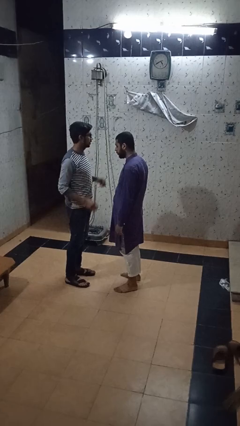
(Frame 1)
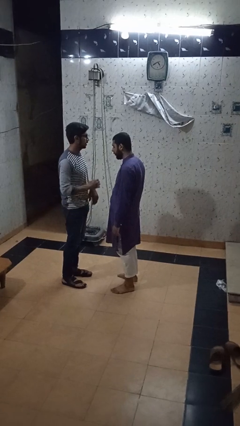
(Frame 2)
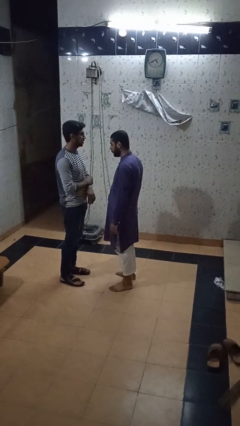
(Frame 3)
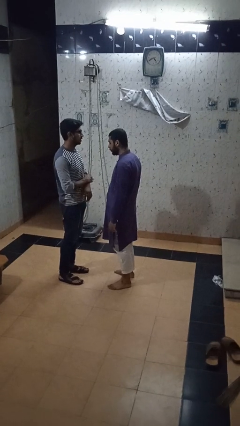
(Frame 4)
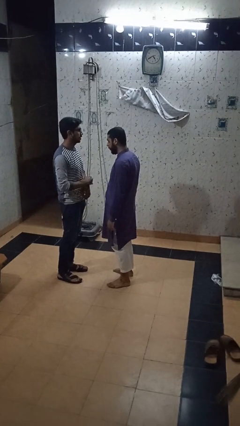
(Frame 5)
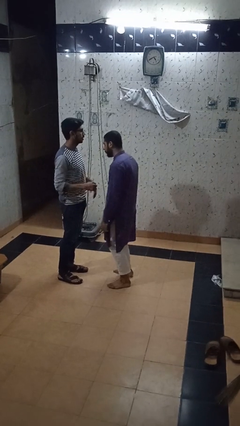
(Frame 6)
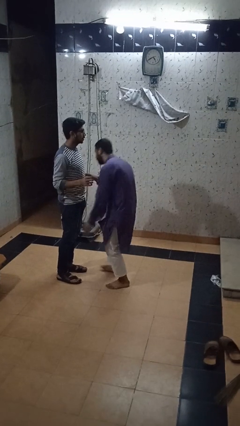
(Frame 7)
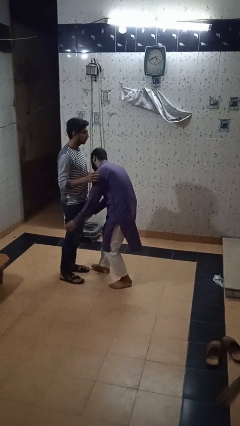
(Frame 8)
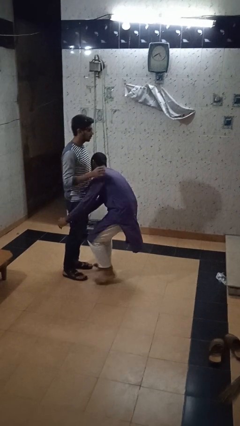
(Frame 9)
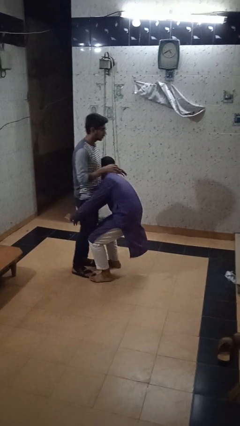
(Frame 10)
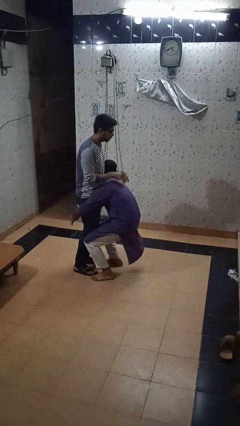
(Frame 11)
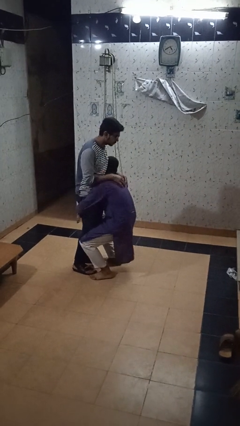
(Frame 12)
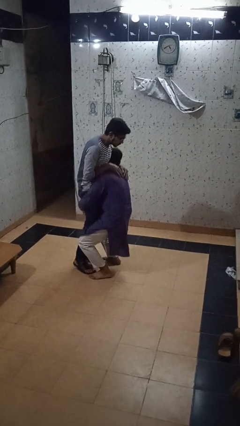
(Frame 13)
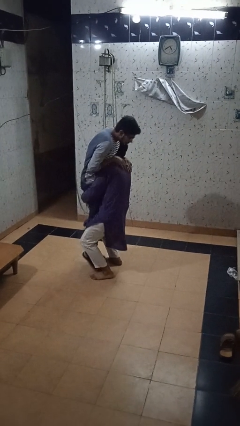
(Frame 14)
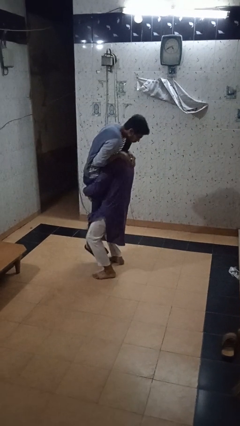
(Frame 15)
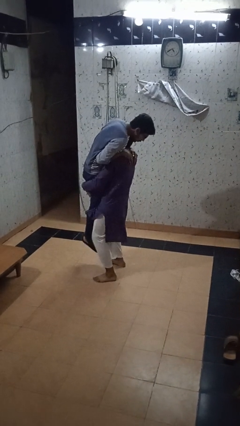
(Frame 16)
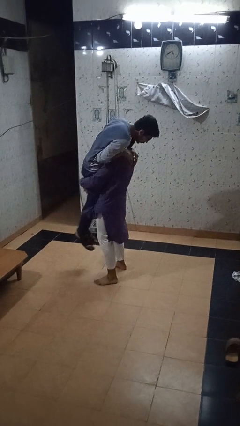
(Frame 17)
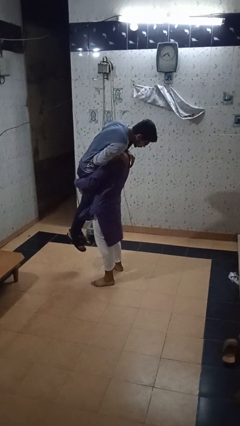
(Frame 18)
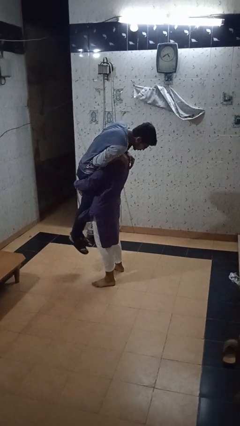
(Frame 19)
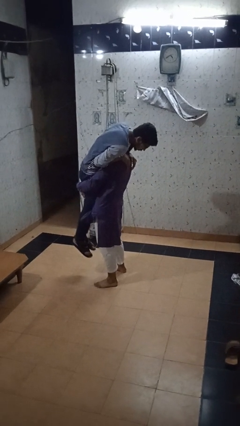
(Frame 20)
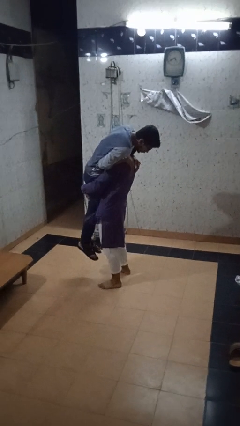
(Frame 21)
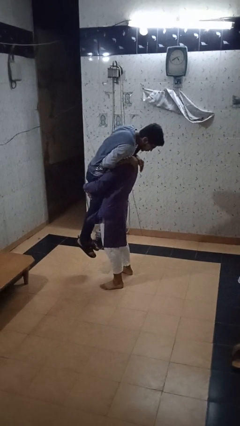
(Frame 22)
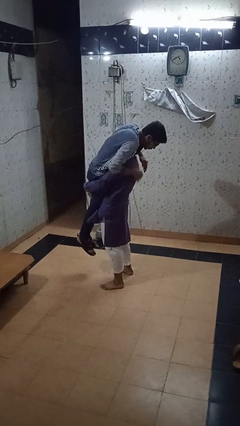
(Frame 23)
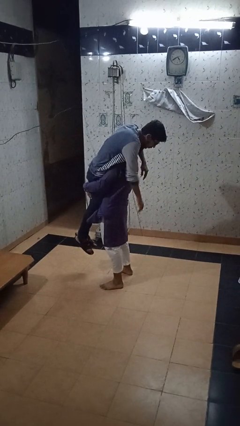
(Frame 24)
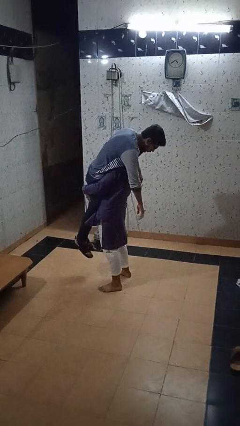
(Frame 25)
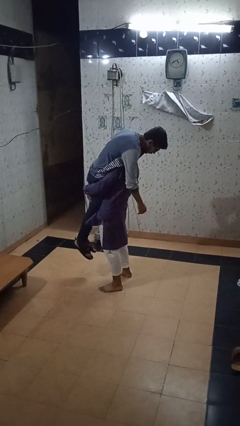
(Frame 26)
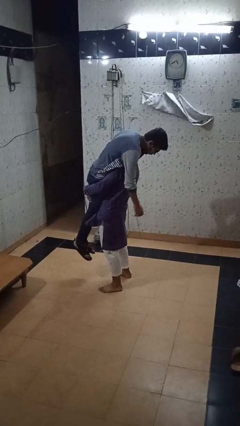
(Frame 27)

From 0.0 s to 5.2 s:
person carries person over shoulder

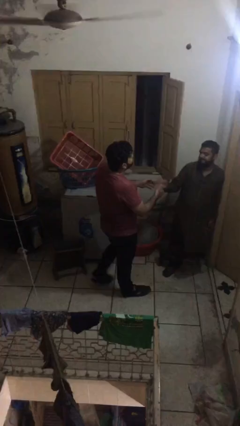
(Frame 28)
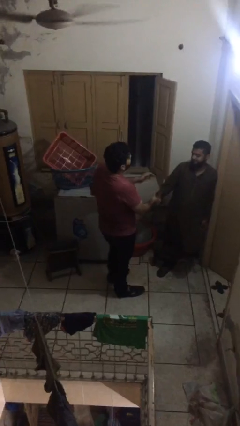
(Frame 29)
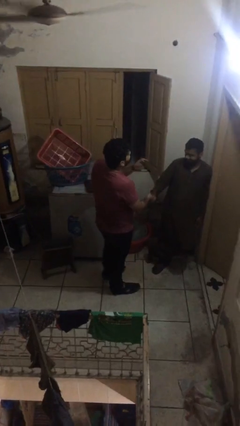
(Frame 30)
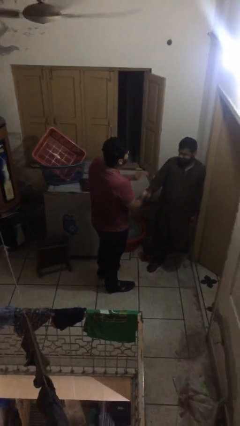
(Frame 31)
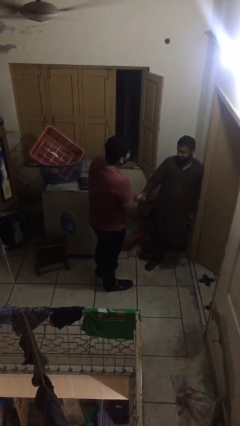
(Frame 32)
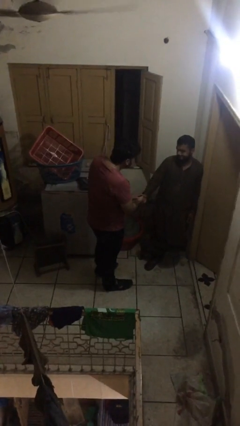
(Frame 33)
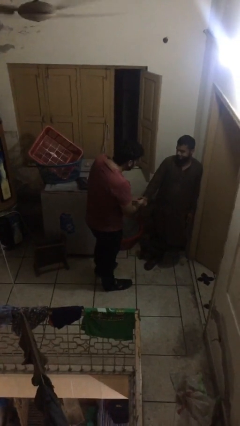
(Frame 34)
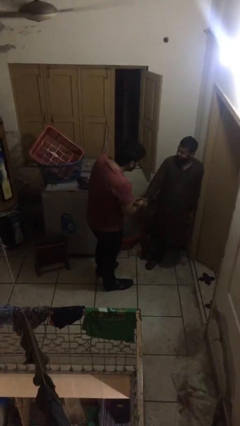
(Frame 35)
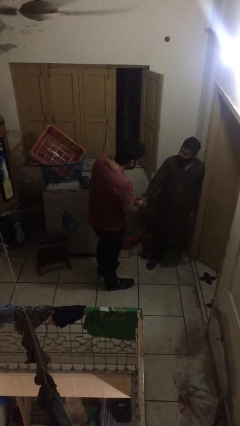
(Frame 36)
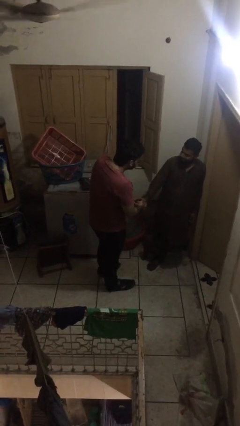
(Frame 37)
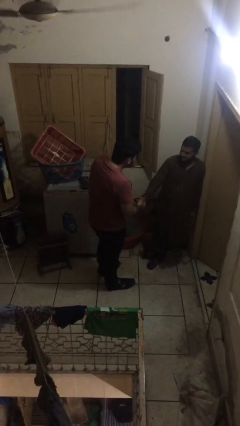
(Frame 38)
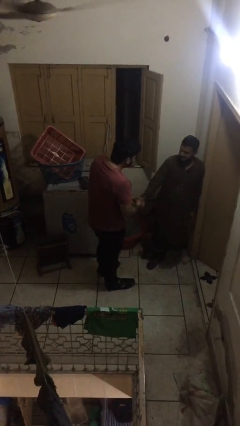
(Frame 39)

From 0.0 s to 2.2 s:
person shakes hand

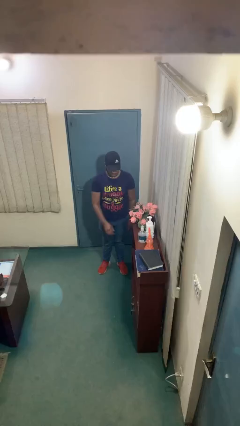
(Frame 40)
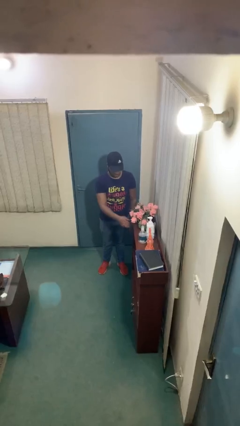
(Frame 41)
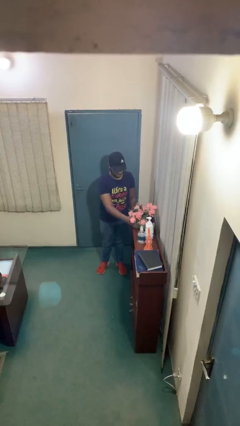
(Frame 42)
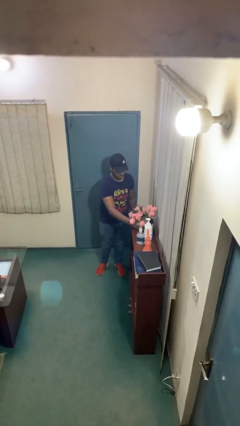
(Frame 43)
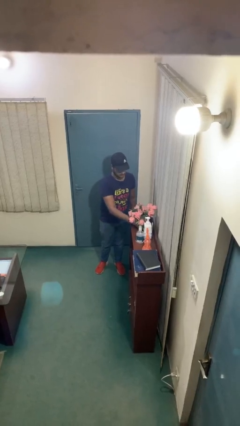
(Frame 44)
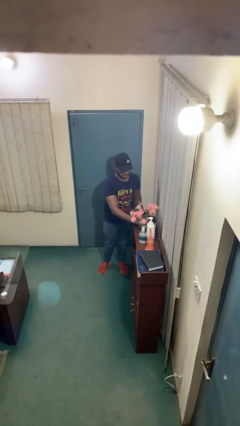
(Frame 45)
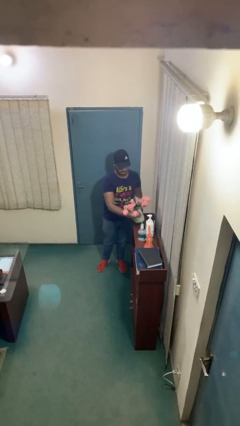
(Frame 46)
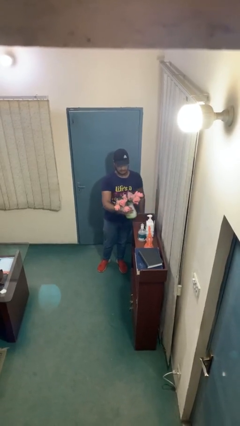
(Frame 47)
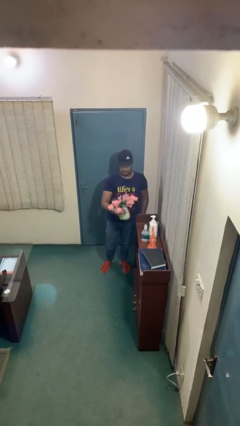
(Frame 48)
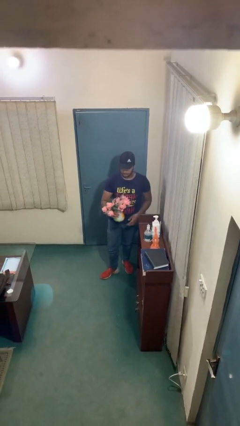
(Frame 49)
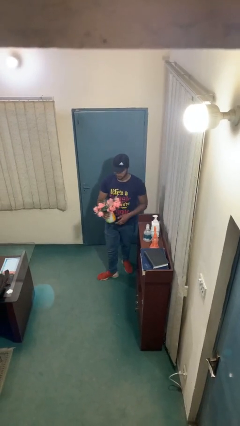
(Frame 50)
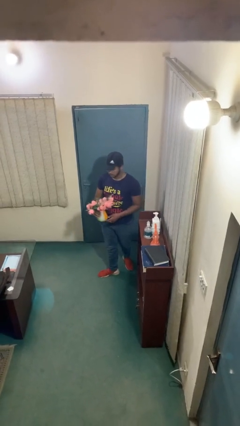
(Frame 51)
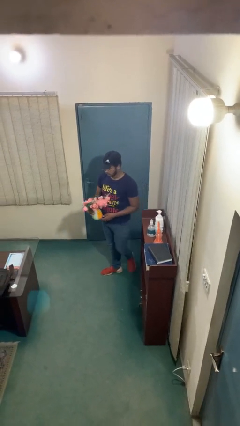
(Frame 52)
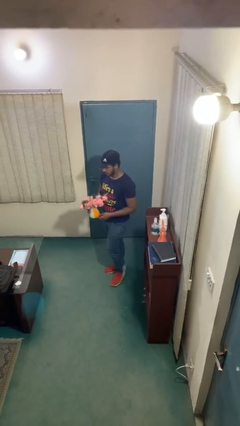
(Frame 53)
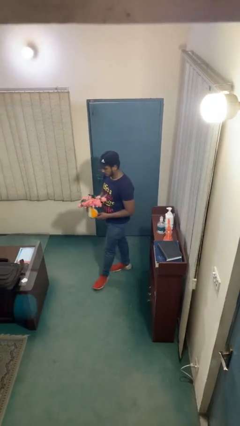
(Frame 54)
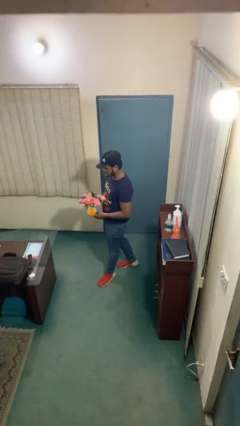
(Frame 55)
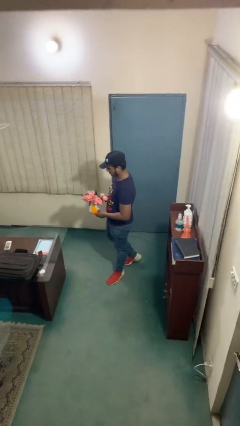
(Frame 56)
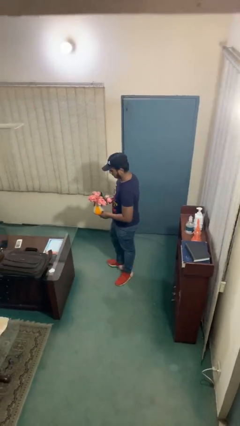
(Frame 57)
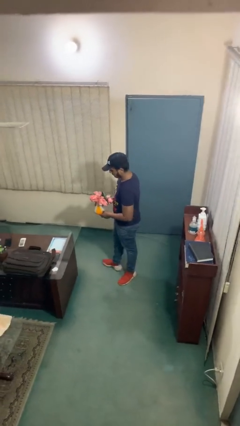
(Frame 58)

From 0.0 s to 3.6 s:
person picks up object from shelf

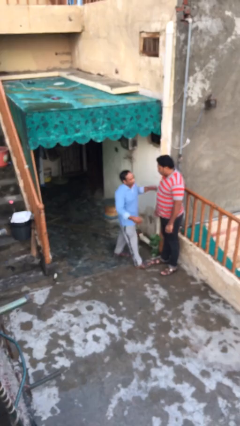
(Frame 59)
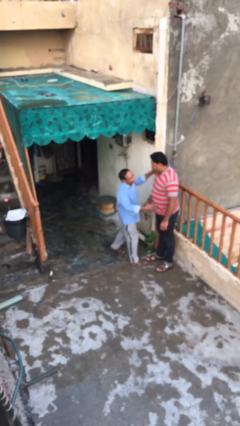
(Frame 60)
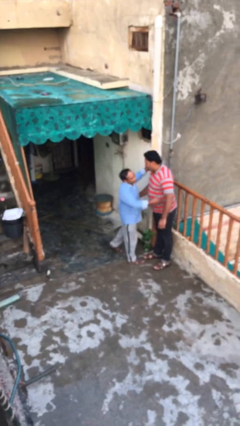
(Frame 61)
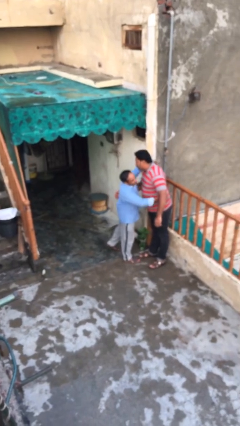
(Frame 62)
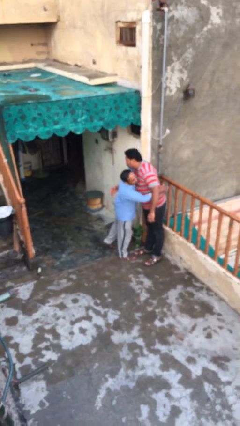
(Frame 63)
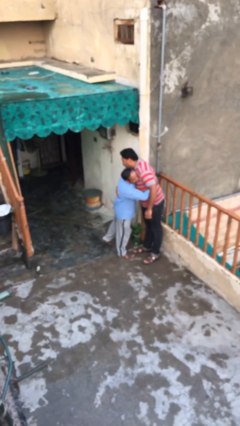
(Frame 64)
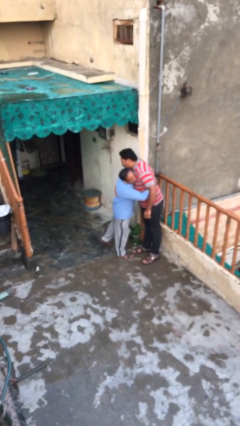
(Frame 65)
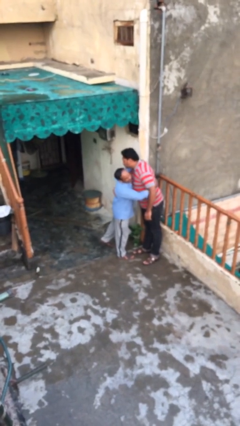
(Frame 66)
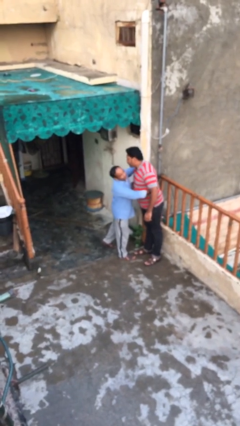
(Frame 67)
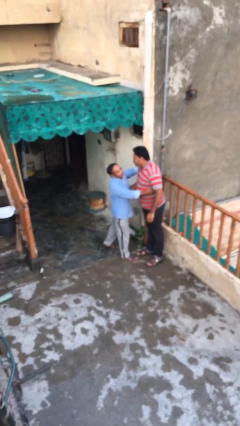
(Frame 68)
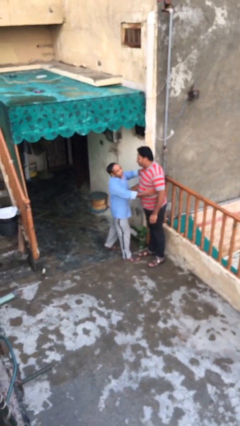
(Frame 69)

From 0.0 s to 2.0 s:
person embraces person

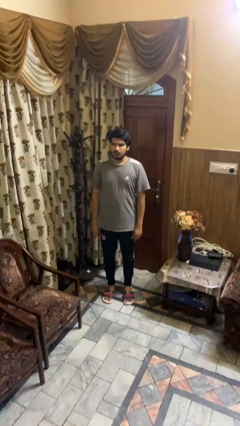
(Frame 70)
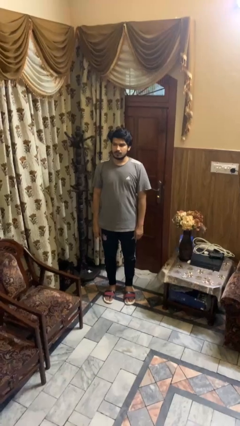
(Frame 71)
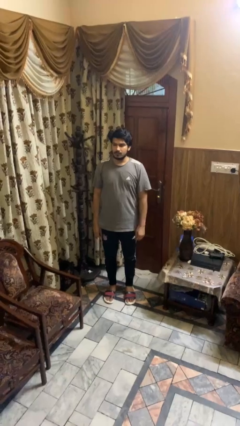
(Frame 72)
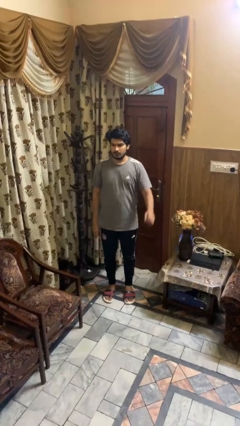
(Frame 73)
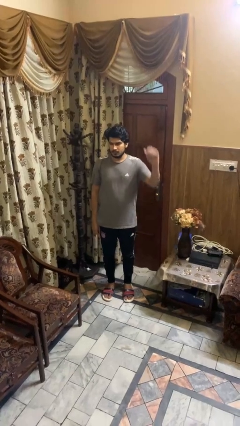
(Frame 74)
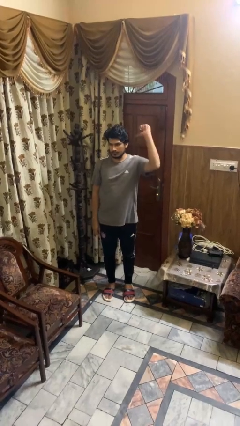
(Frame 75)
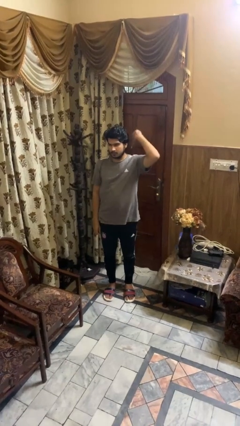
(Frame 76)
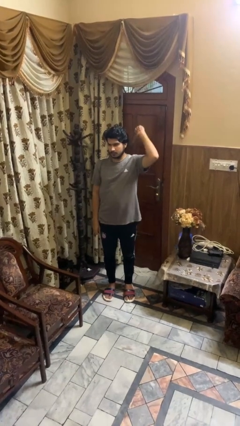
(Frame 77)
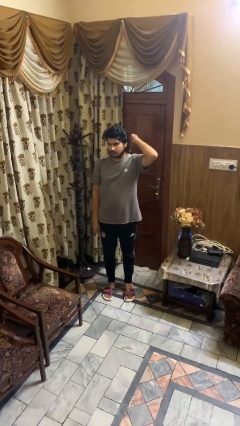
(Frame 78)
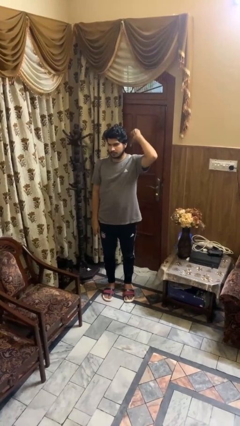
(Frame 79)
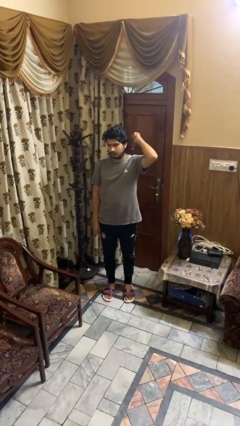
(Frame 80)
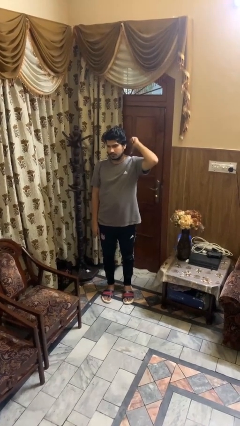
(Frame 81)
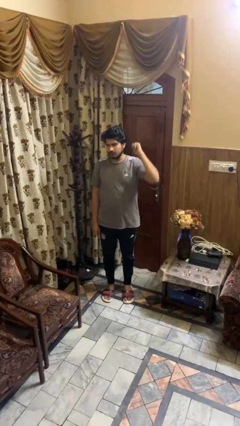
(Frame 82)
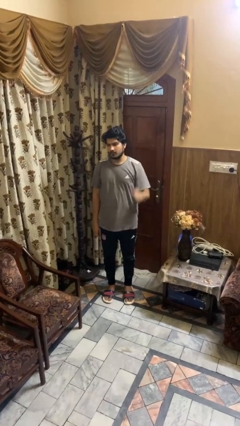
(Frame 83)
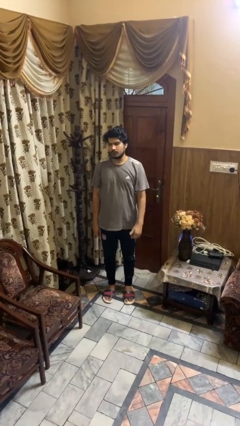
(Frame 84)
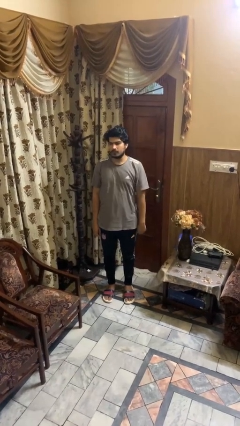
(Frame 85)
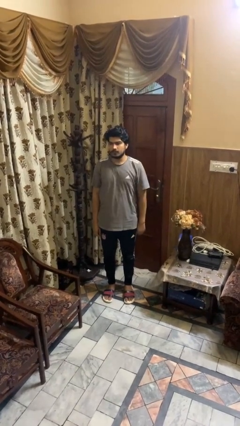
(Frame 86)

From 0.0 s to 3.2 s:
person gestures behind me

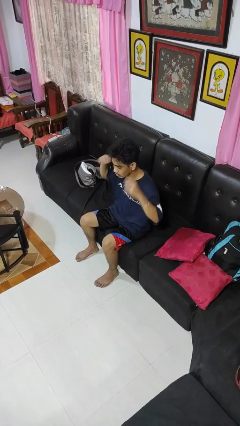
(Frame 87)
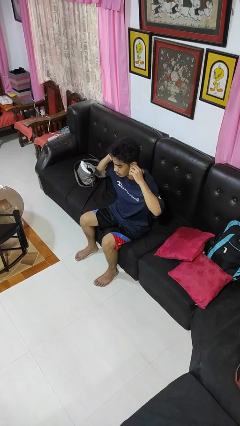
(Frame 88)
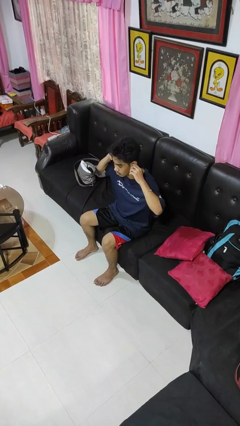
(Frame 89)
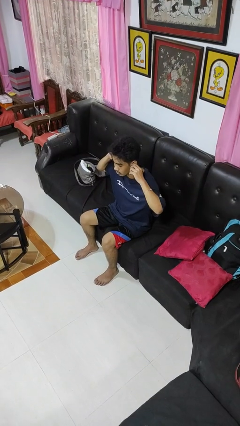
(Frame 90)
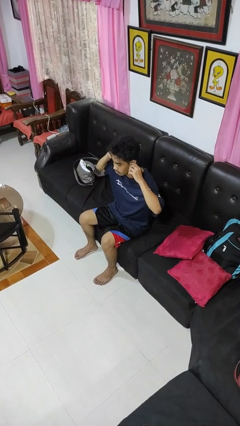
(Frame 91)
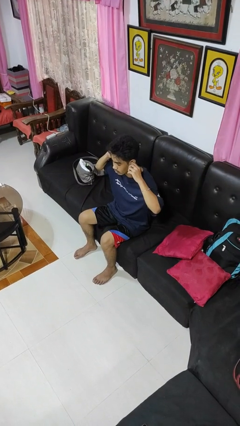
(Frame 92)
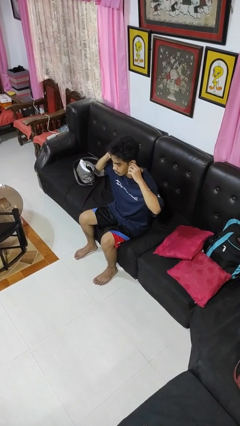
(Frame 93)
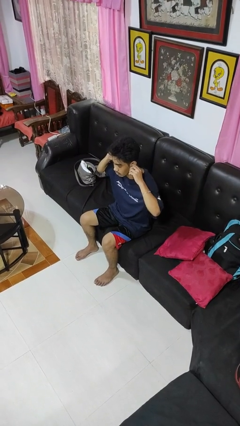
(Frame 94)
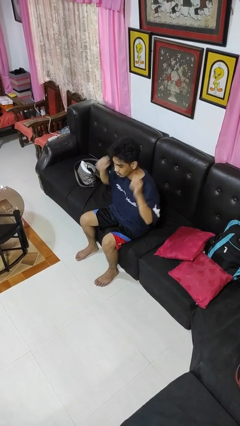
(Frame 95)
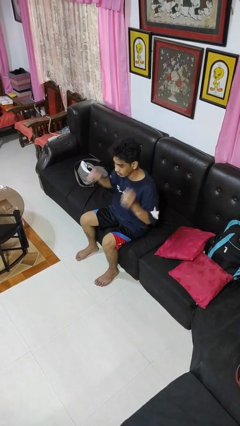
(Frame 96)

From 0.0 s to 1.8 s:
person puts fingers in ear
